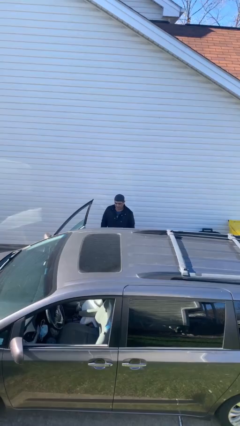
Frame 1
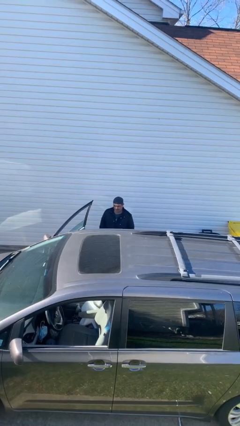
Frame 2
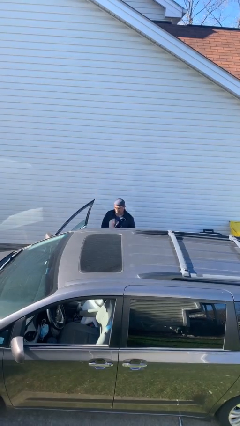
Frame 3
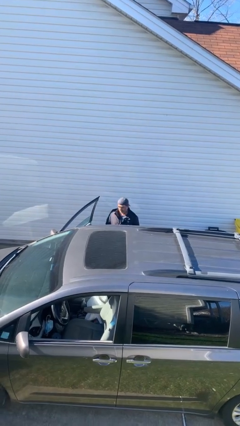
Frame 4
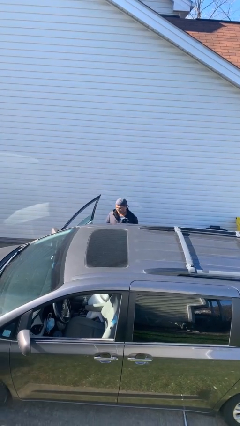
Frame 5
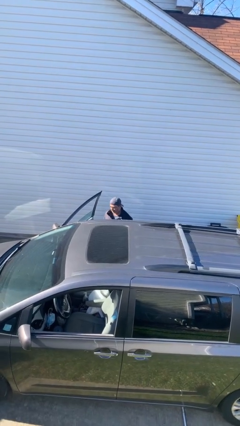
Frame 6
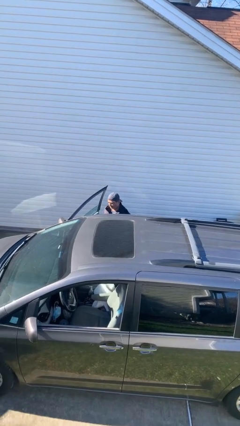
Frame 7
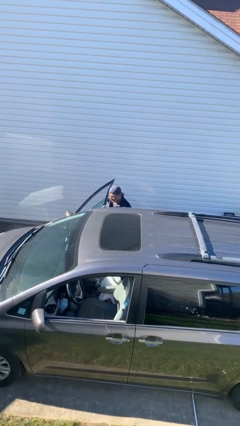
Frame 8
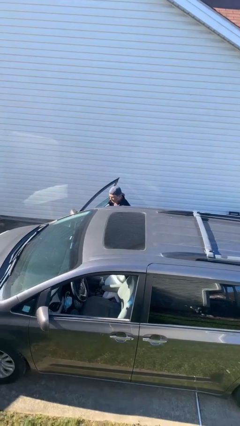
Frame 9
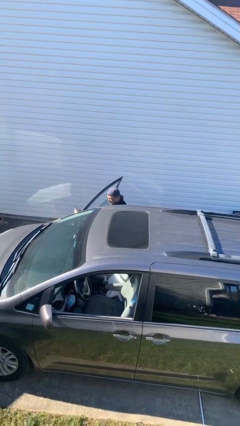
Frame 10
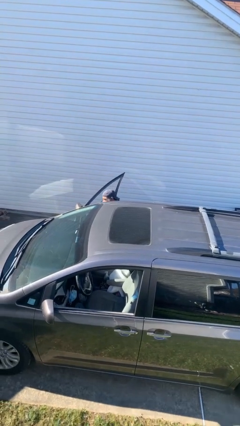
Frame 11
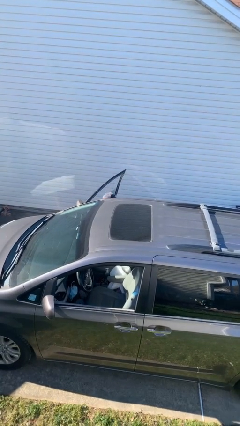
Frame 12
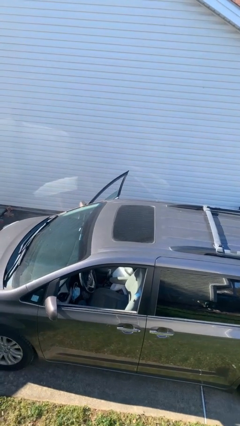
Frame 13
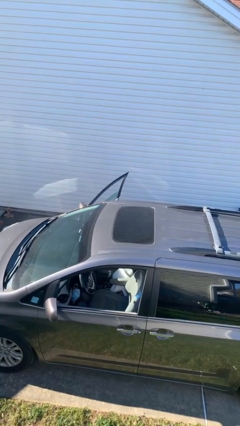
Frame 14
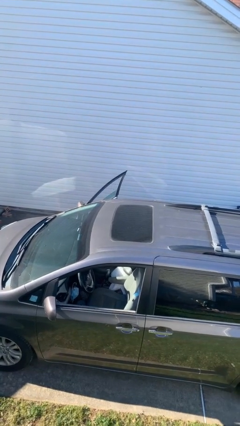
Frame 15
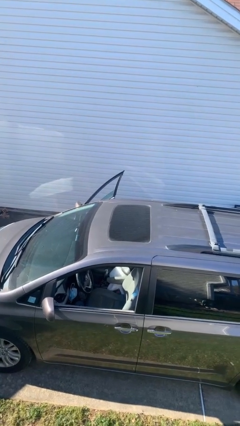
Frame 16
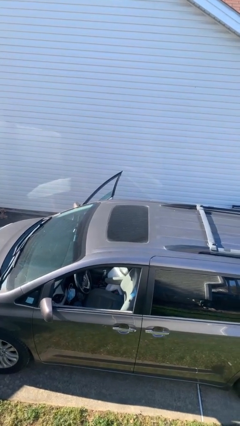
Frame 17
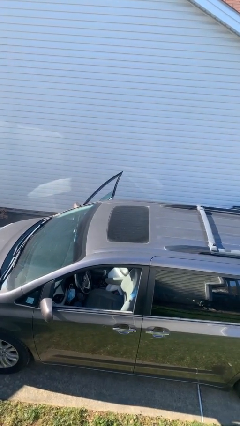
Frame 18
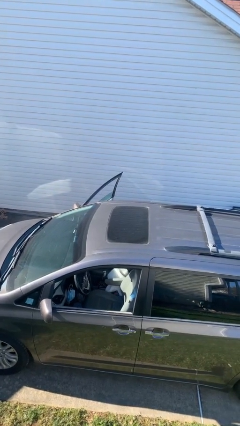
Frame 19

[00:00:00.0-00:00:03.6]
person enters car

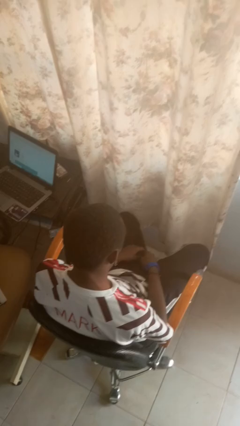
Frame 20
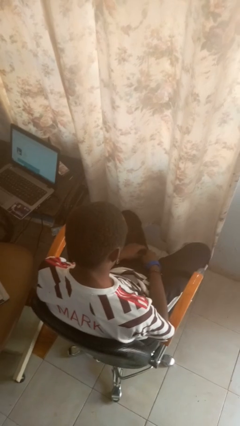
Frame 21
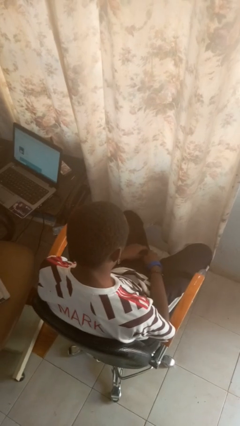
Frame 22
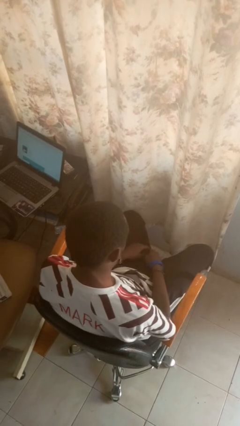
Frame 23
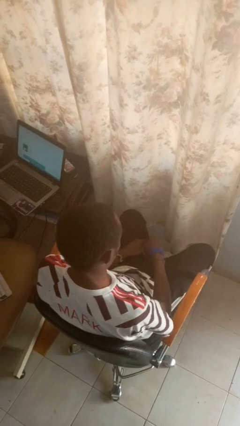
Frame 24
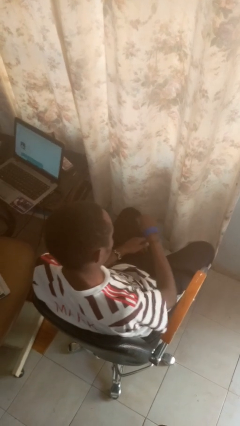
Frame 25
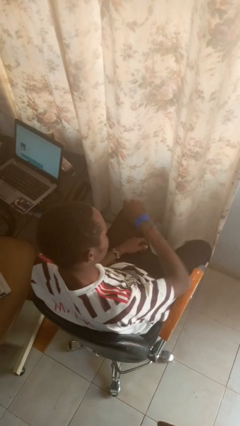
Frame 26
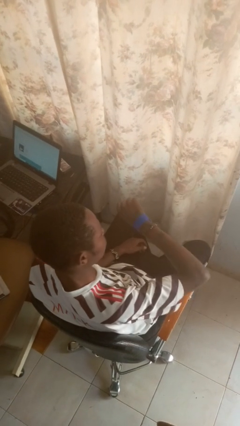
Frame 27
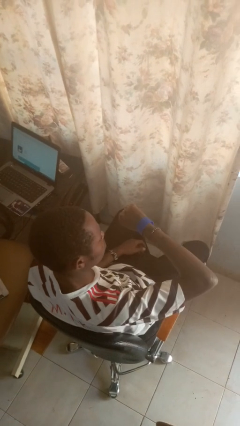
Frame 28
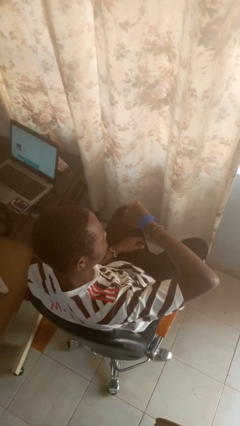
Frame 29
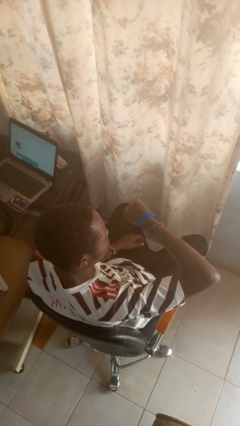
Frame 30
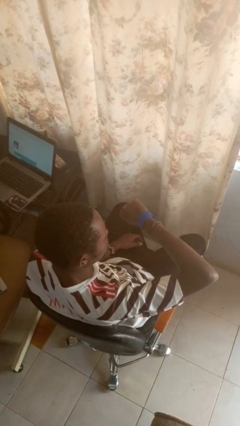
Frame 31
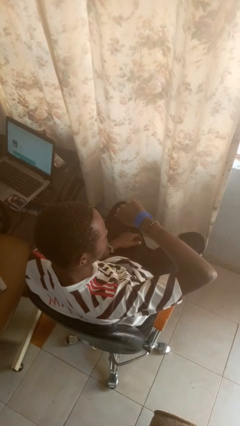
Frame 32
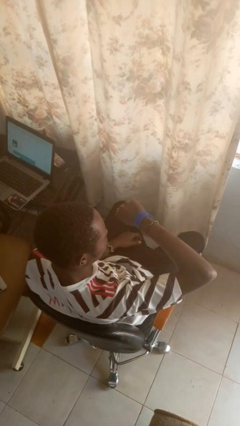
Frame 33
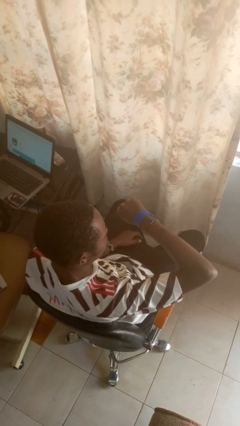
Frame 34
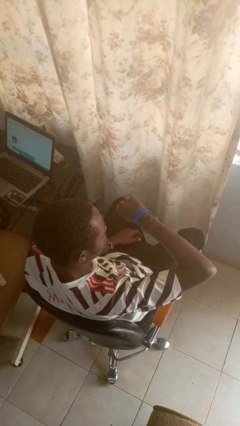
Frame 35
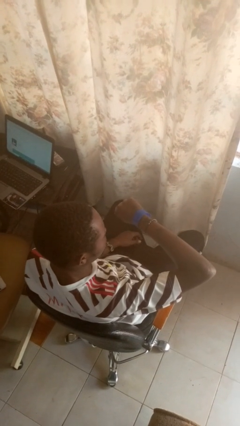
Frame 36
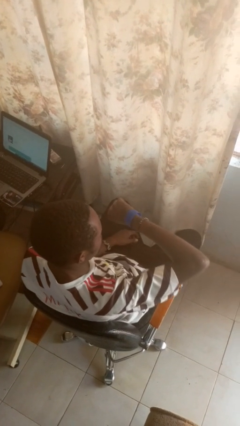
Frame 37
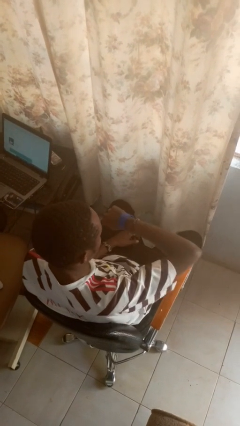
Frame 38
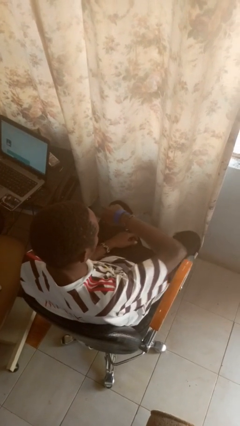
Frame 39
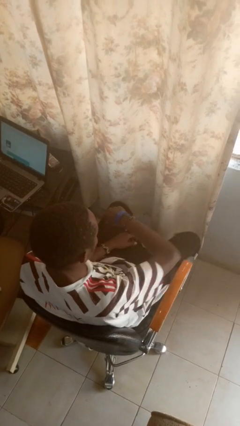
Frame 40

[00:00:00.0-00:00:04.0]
person looks at wristwatch

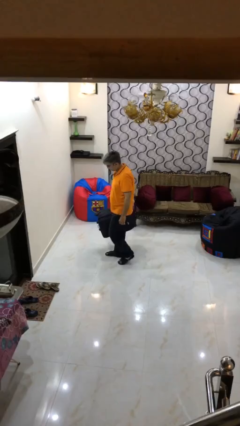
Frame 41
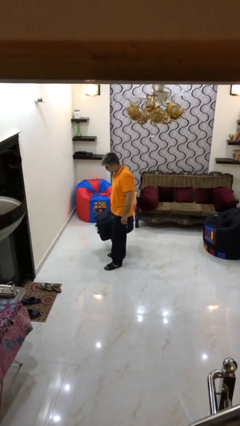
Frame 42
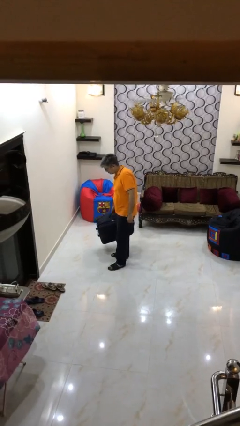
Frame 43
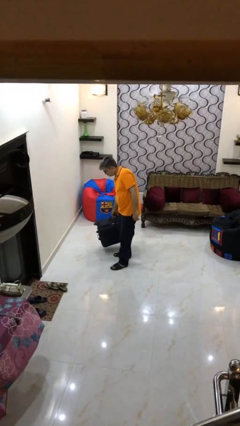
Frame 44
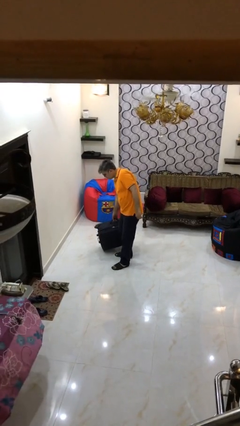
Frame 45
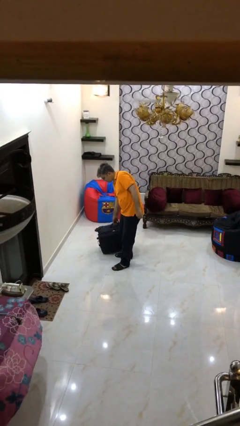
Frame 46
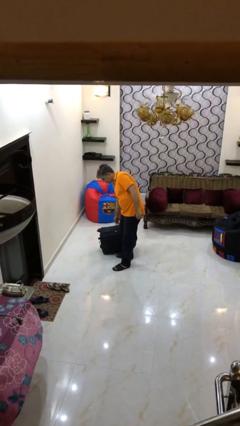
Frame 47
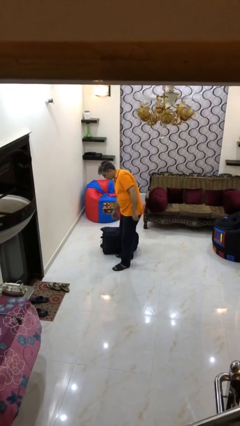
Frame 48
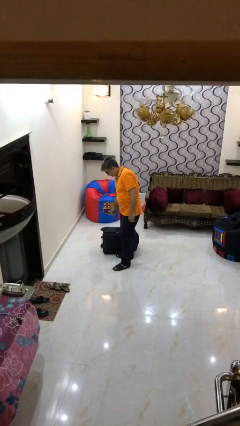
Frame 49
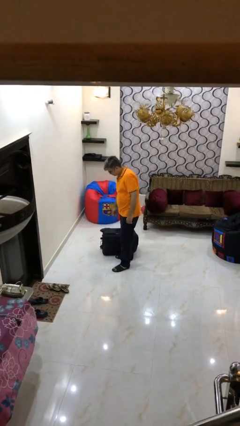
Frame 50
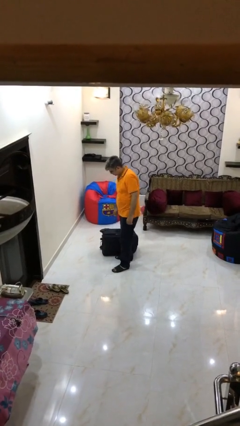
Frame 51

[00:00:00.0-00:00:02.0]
person puts down object on floor

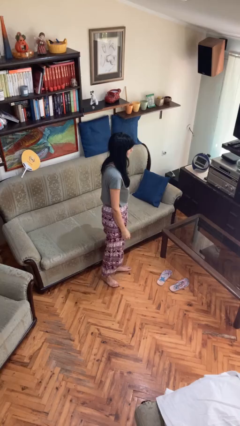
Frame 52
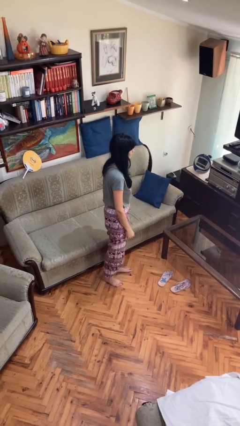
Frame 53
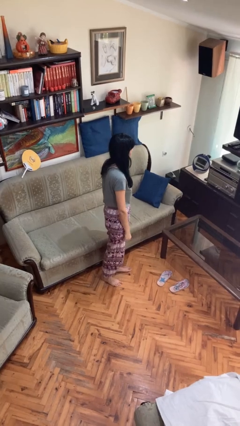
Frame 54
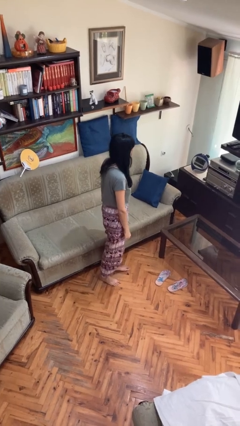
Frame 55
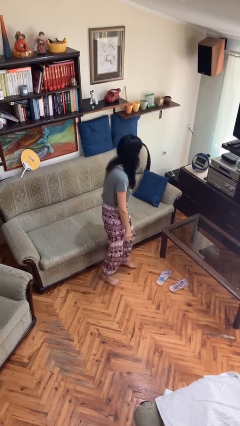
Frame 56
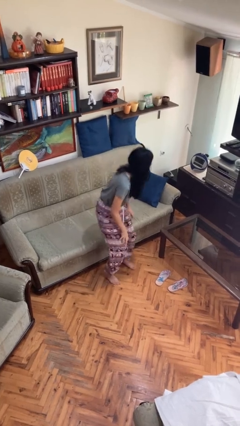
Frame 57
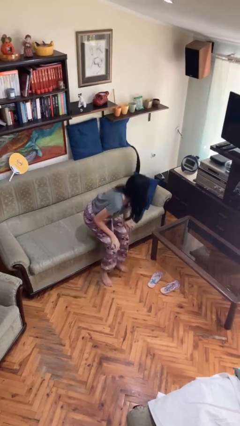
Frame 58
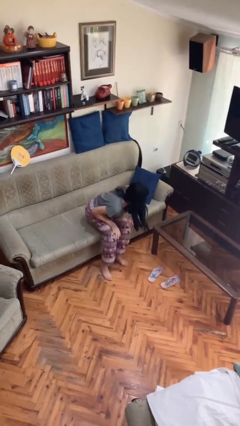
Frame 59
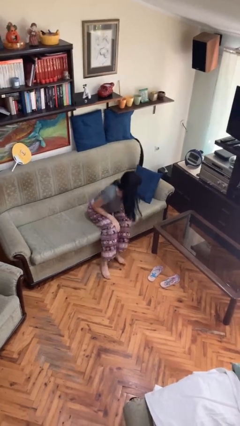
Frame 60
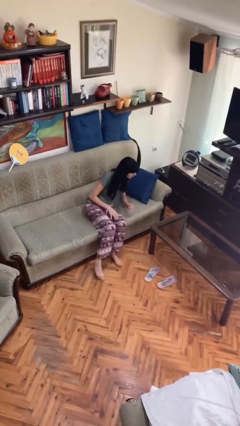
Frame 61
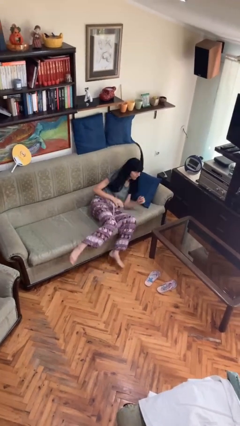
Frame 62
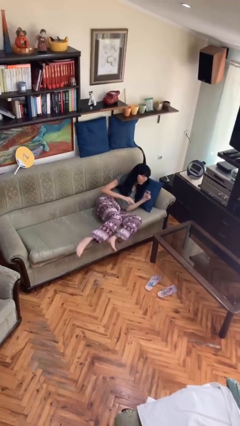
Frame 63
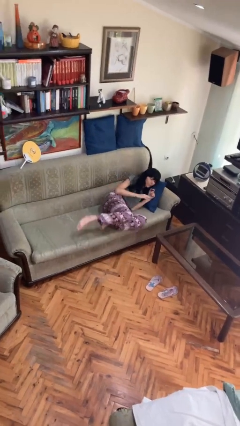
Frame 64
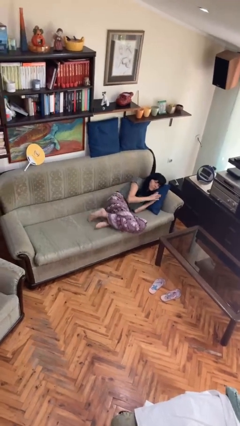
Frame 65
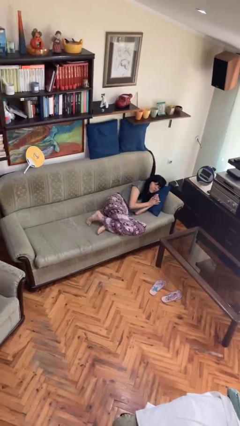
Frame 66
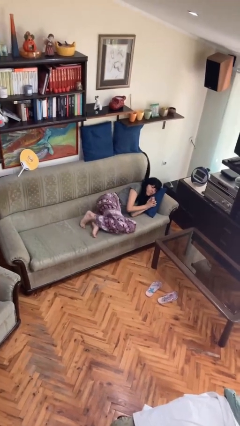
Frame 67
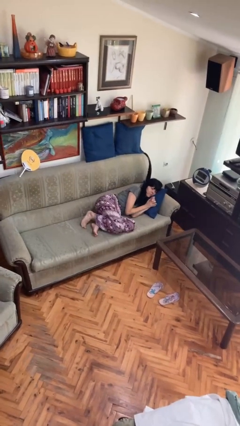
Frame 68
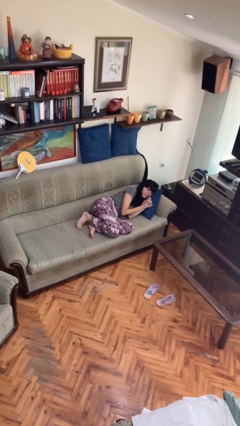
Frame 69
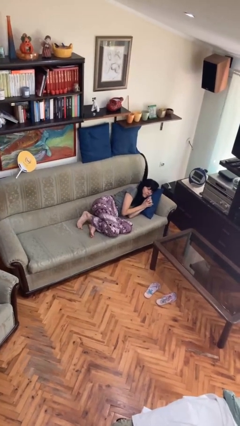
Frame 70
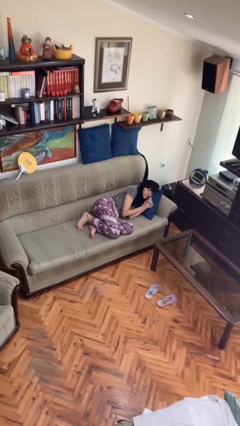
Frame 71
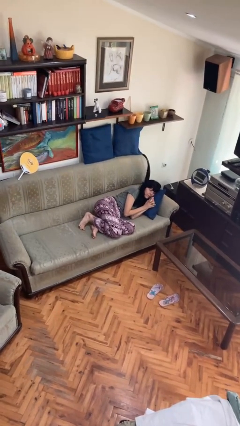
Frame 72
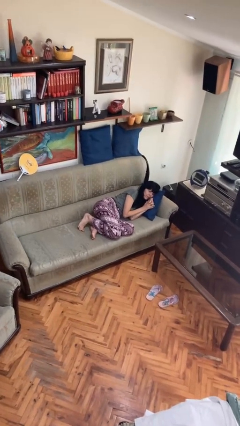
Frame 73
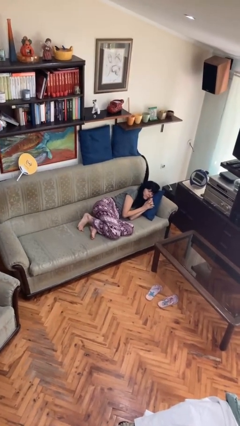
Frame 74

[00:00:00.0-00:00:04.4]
person lies down on couch

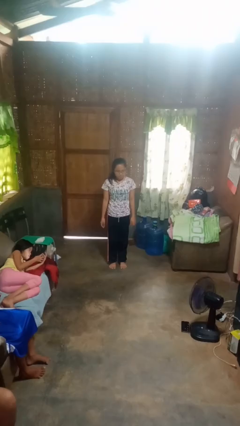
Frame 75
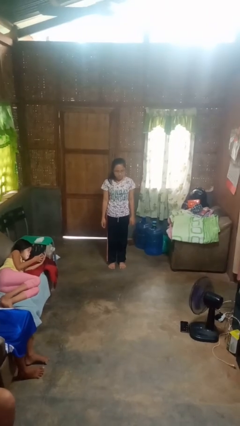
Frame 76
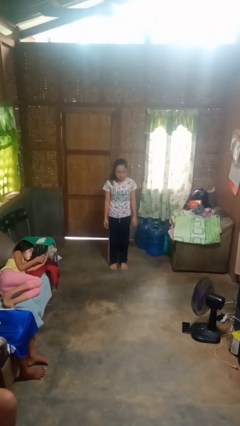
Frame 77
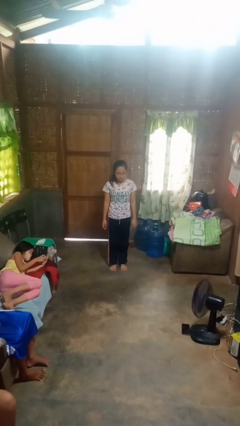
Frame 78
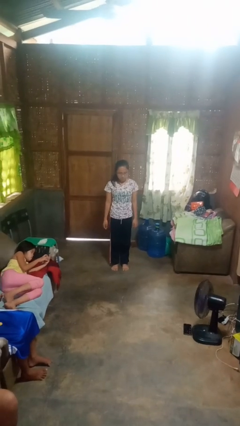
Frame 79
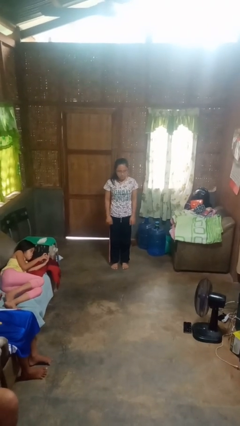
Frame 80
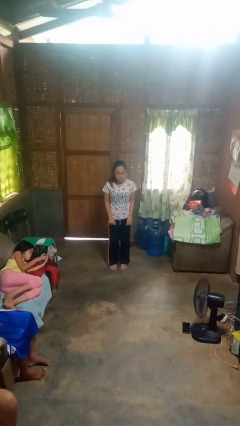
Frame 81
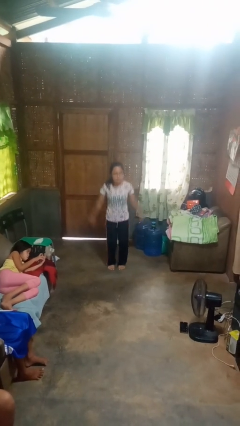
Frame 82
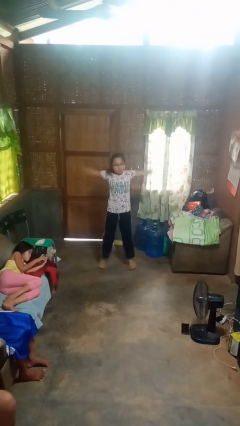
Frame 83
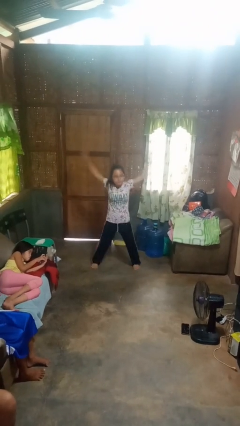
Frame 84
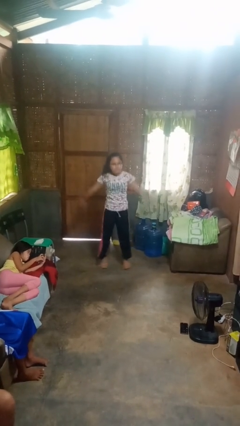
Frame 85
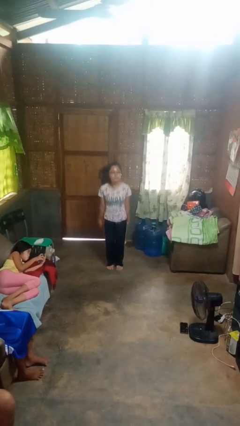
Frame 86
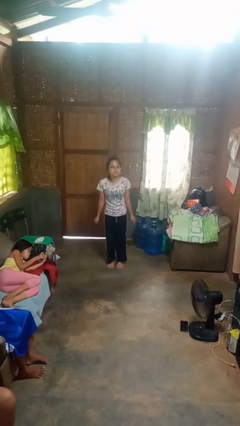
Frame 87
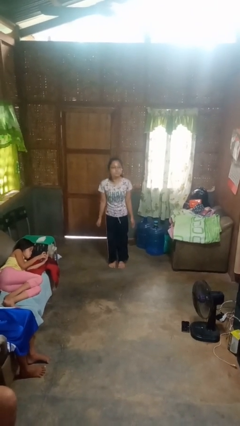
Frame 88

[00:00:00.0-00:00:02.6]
person exercises with jumping jacks

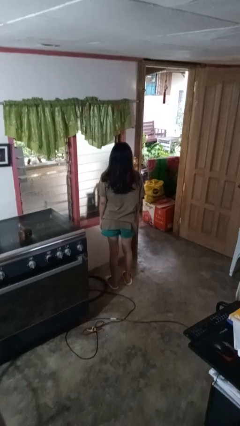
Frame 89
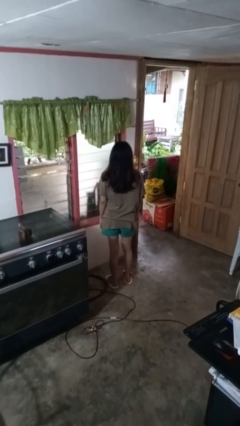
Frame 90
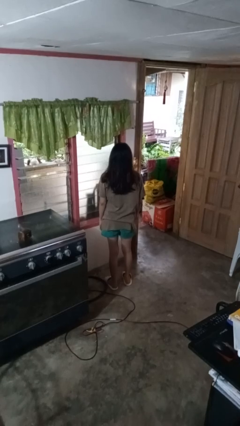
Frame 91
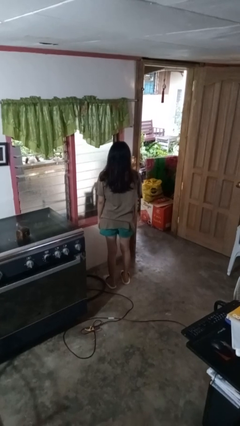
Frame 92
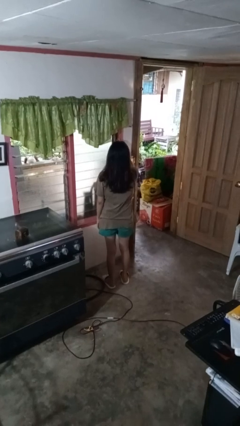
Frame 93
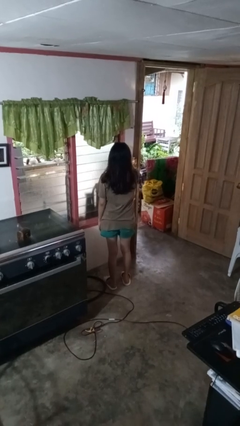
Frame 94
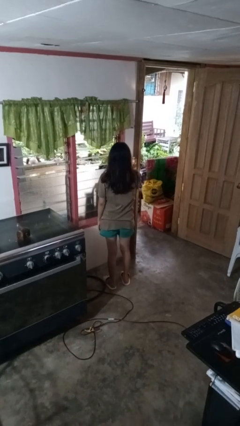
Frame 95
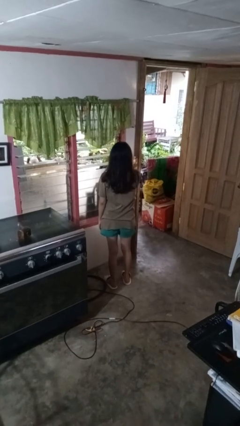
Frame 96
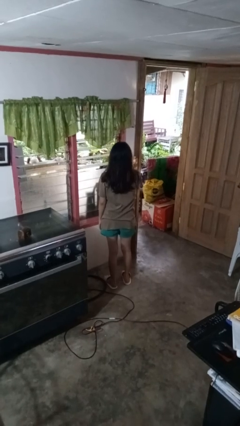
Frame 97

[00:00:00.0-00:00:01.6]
person opens home window
